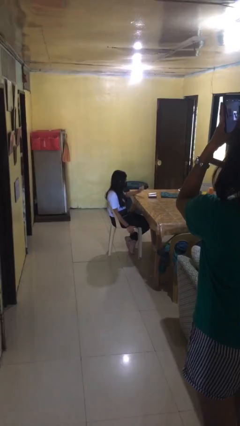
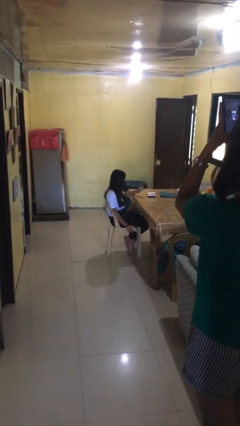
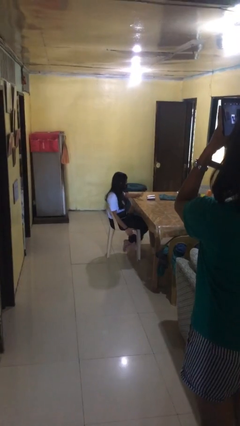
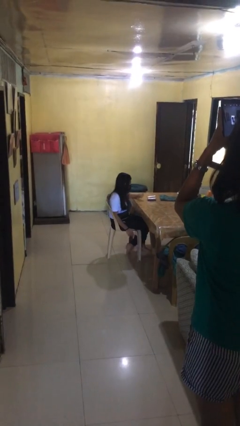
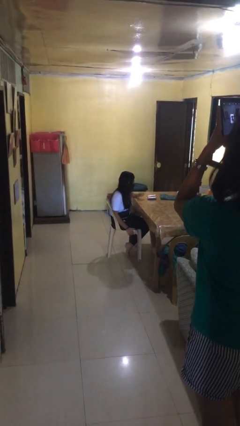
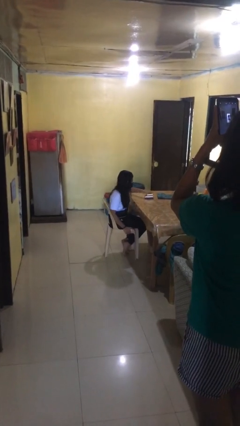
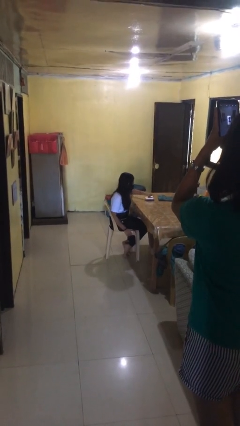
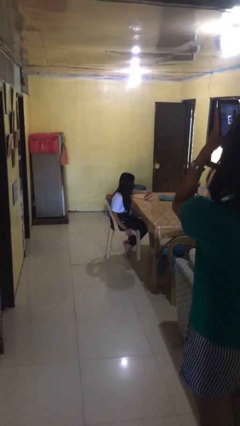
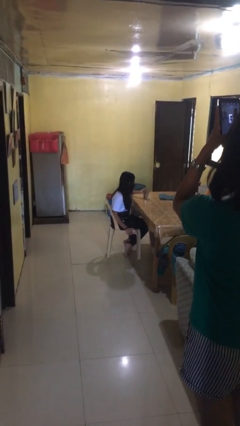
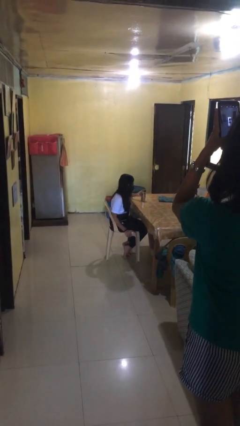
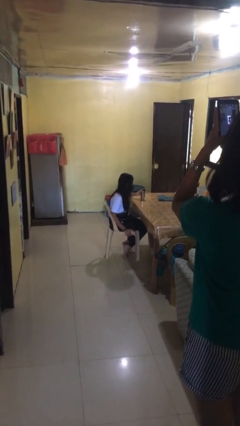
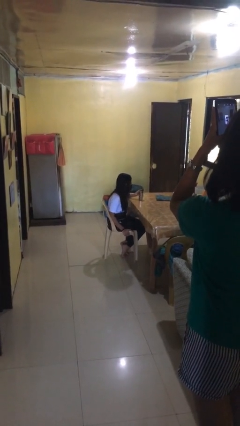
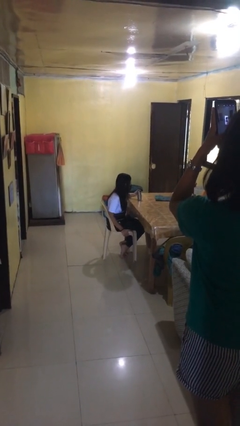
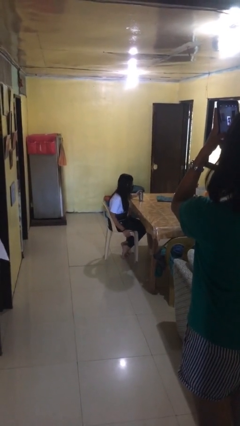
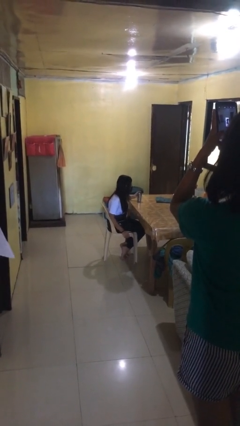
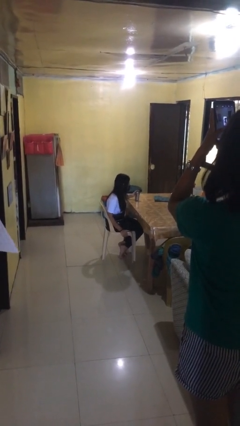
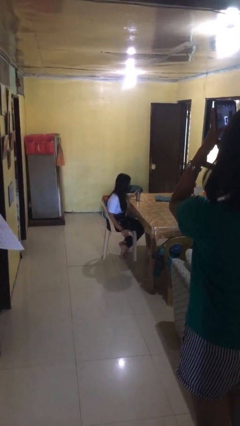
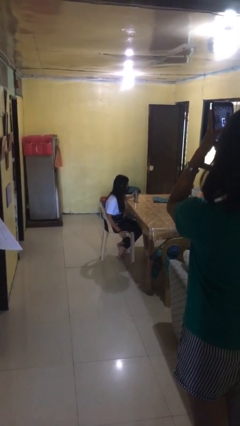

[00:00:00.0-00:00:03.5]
person sets upright glass

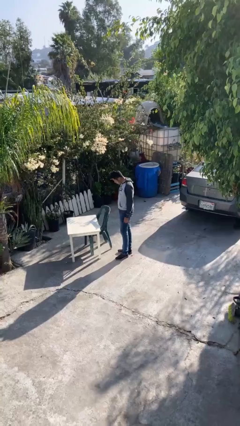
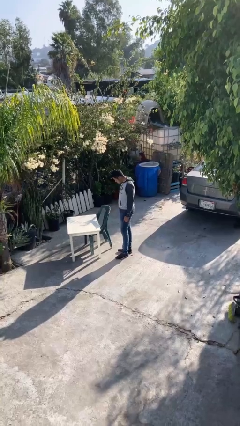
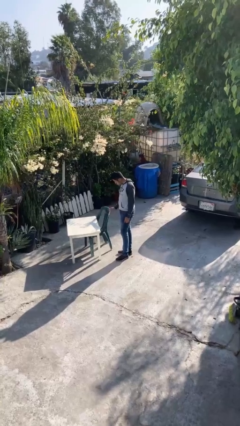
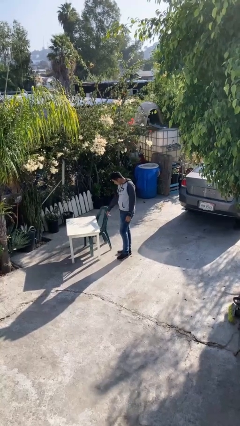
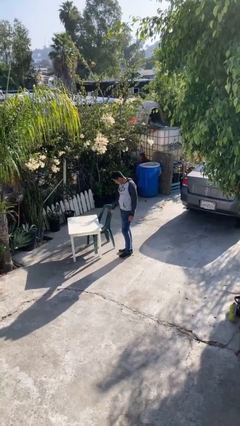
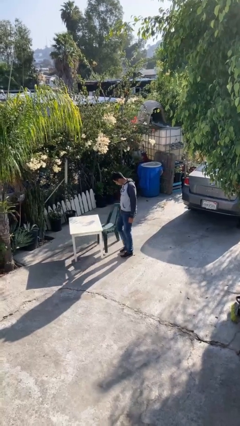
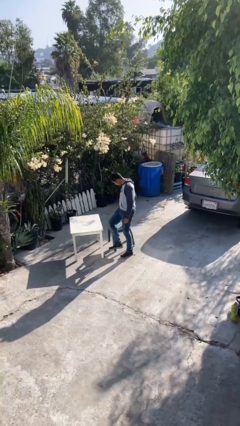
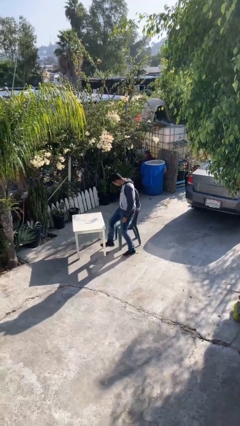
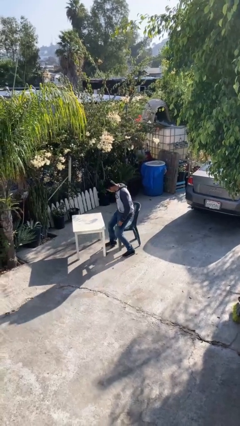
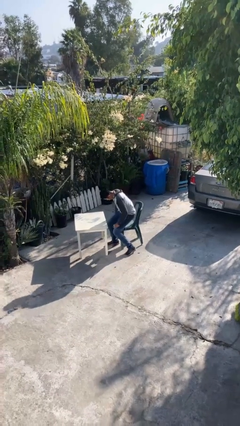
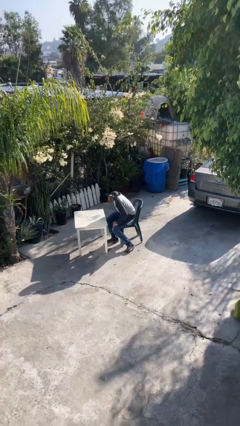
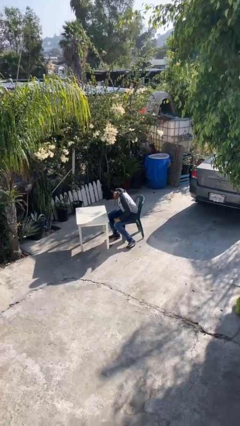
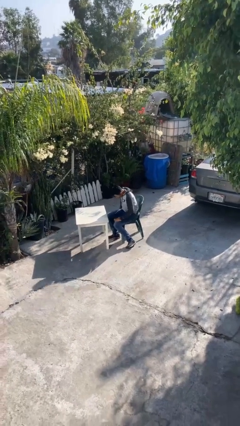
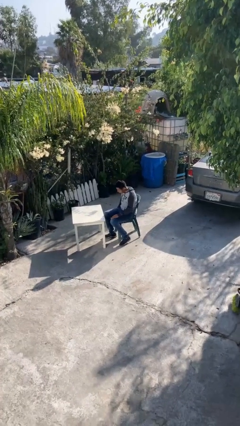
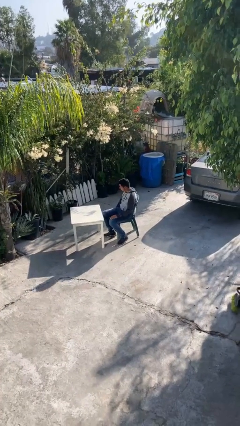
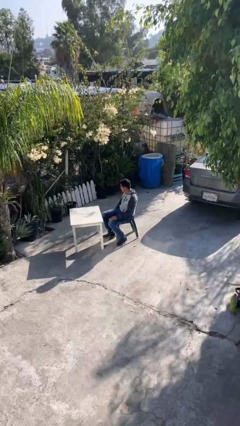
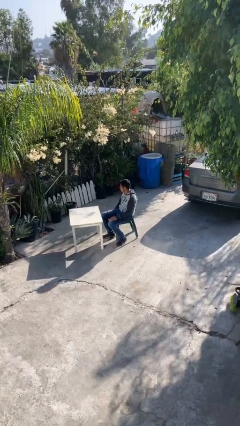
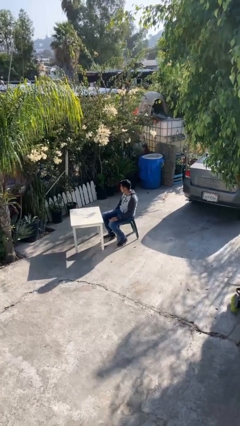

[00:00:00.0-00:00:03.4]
person sits down

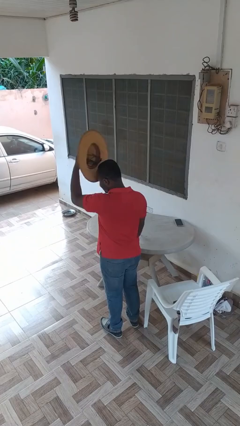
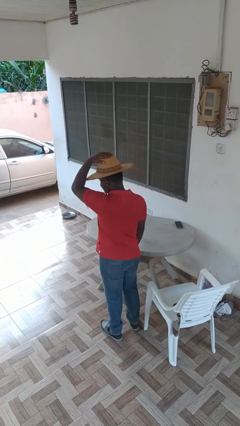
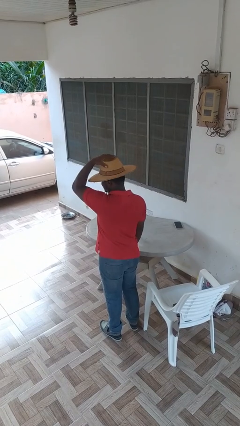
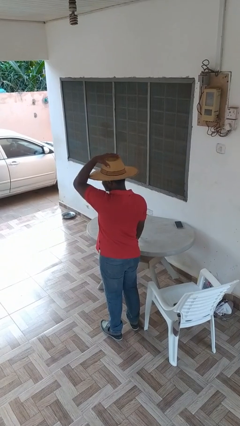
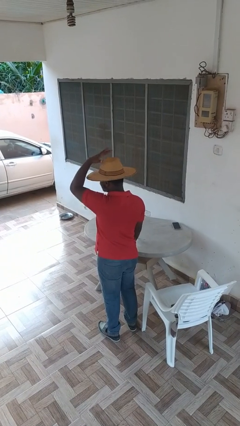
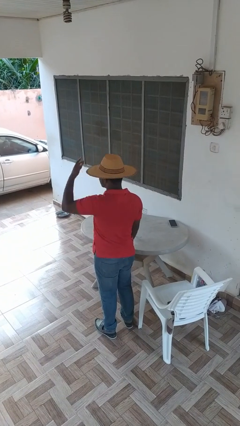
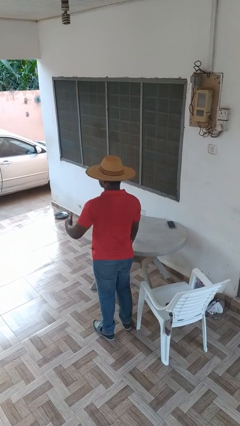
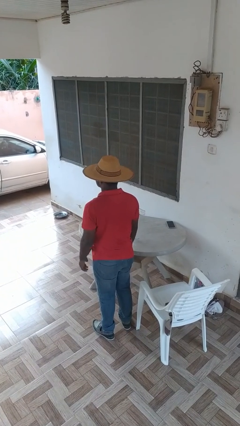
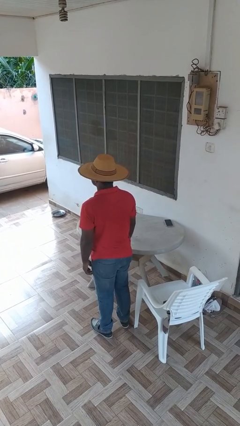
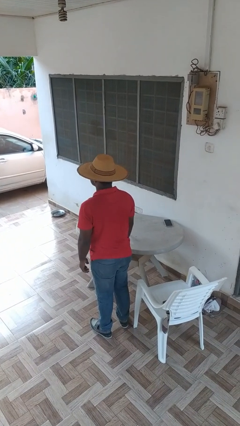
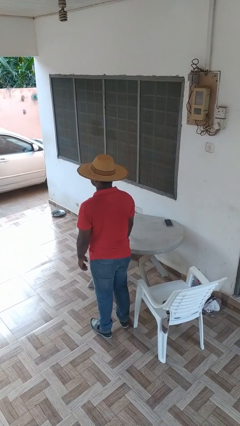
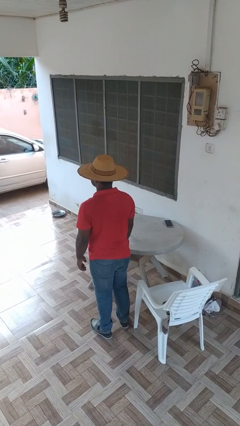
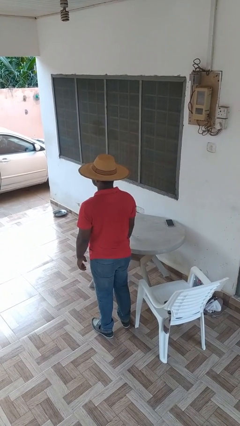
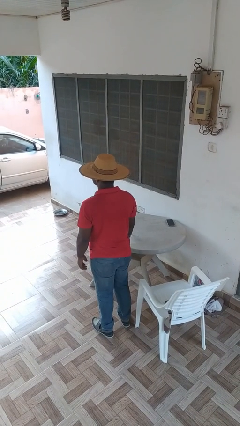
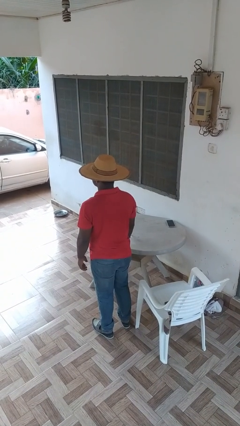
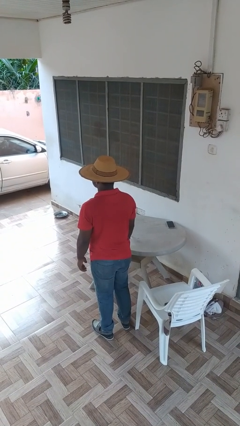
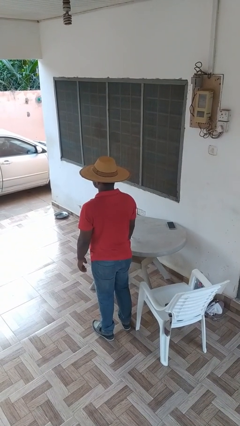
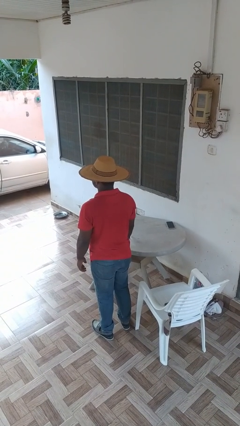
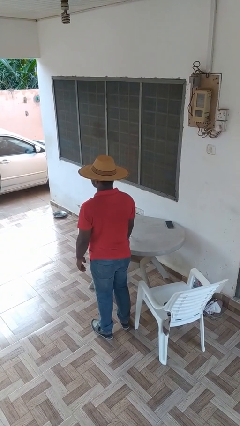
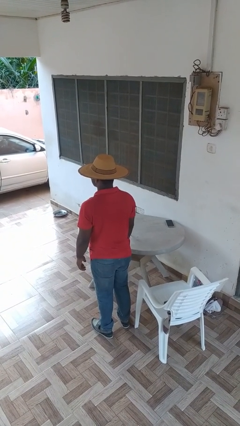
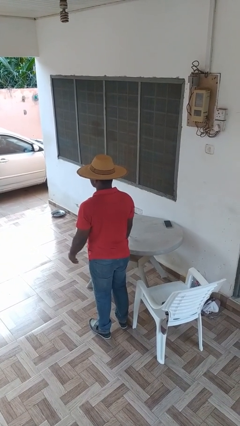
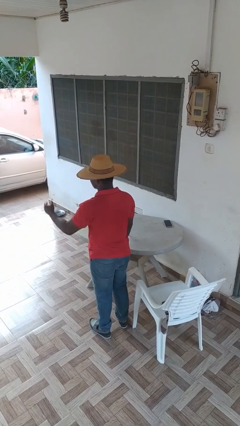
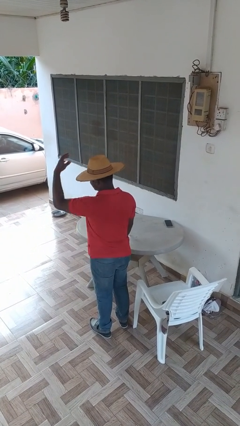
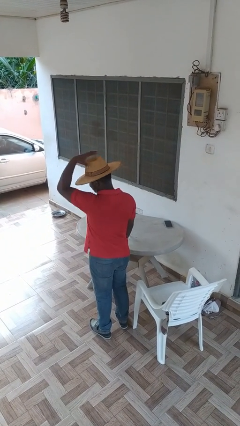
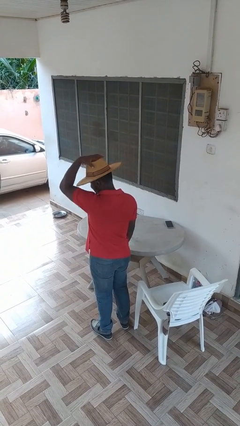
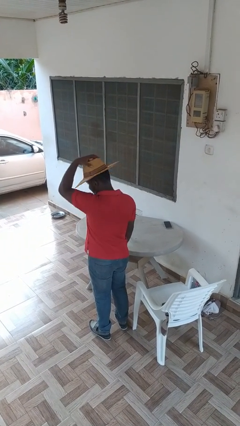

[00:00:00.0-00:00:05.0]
person puts on hat

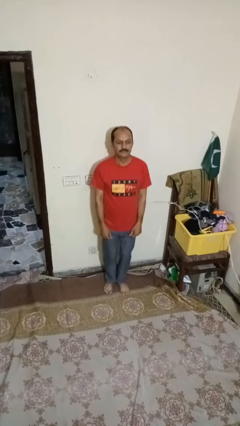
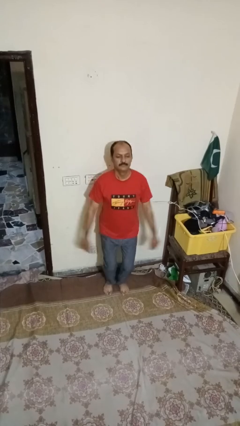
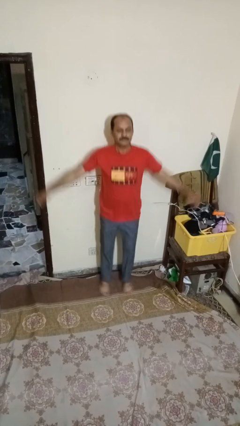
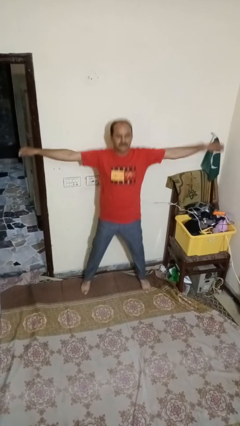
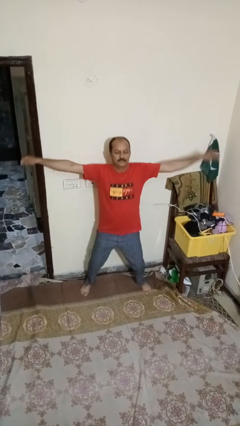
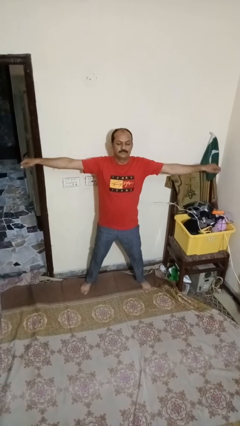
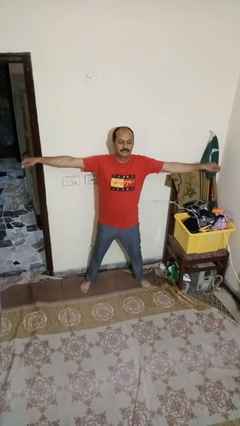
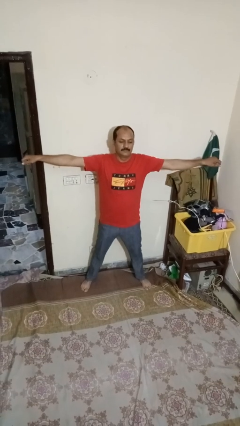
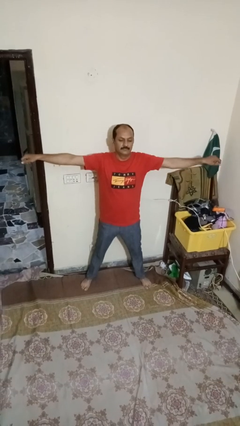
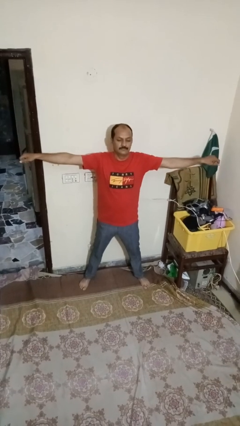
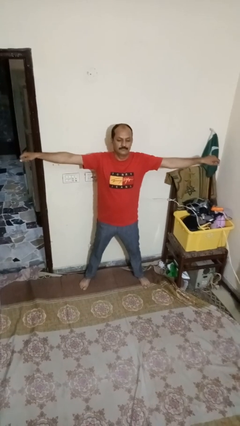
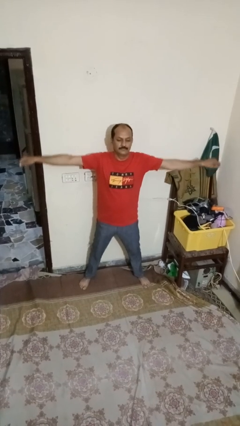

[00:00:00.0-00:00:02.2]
person exercises with jumping jacks

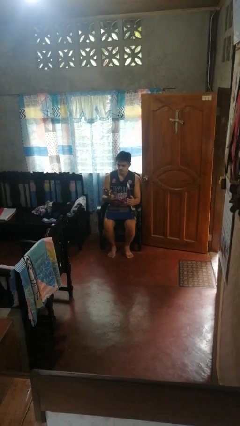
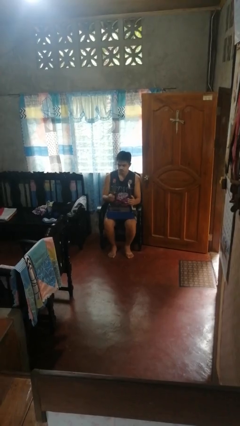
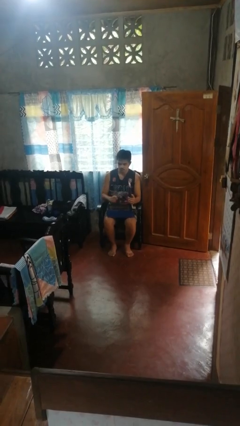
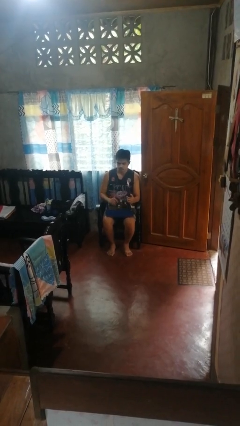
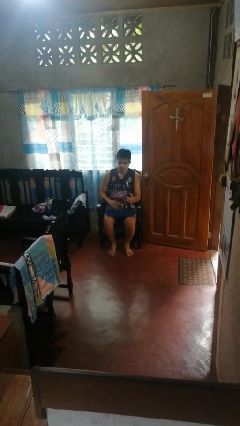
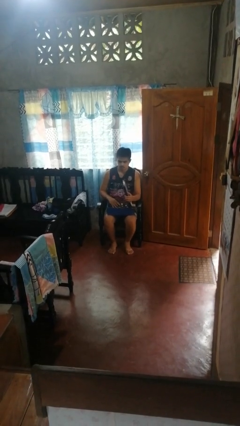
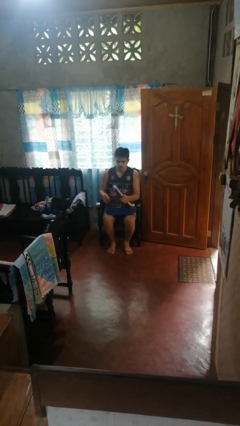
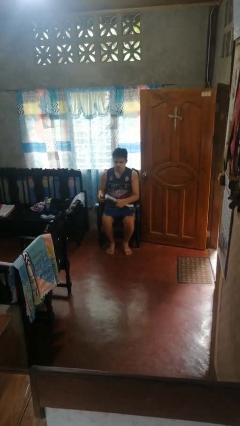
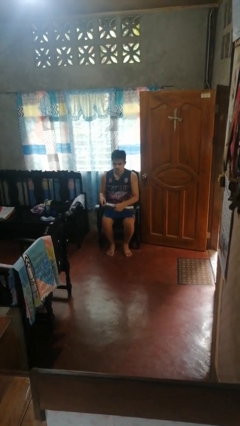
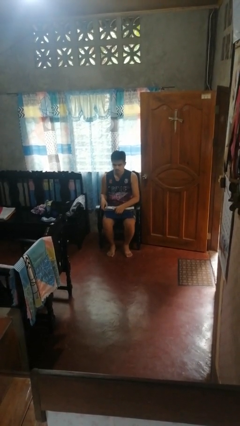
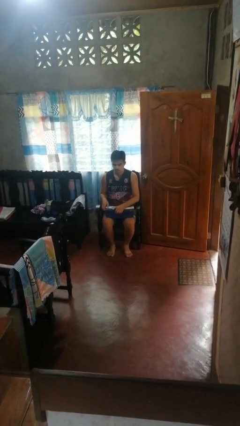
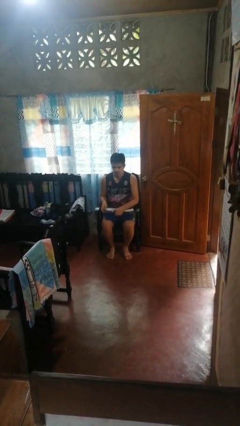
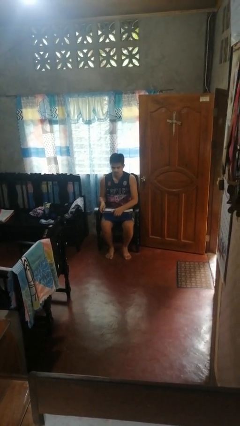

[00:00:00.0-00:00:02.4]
person puts object into box

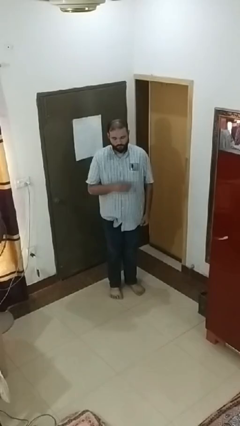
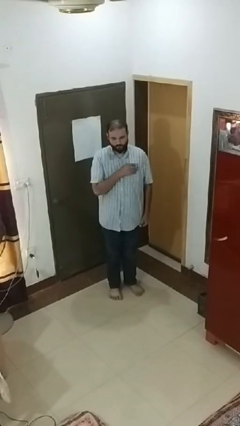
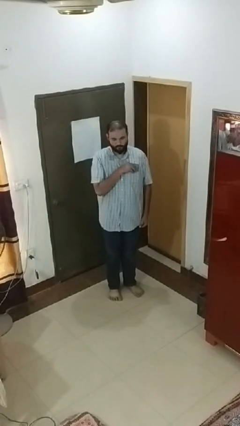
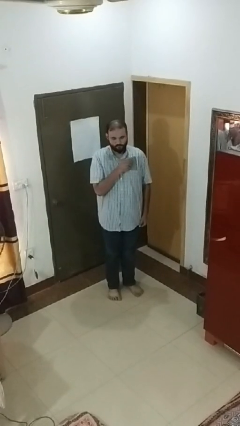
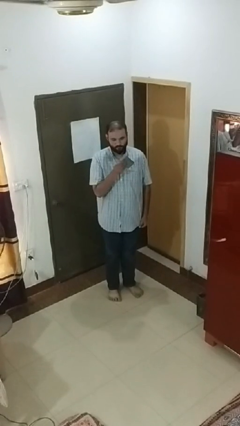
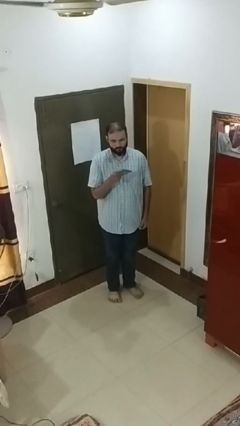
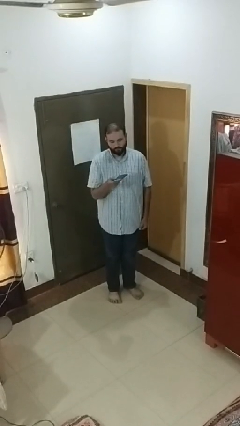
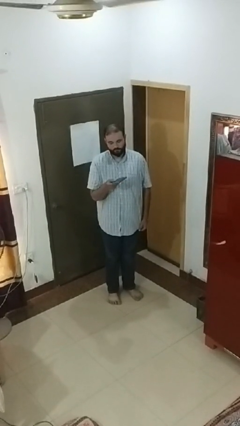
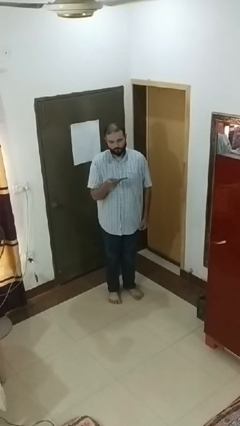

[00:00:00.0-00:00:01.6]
person takes phone from pocket
